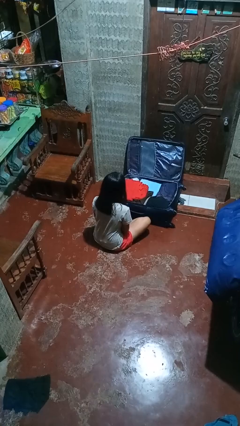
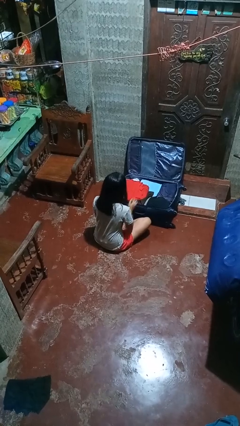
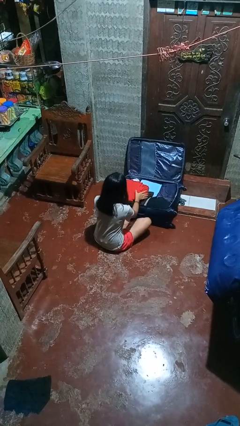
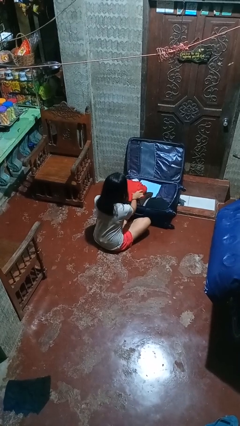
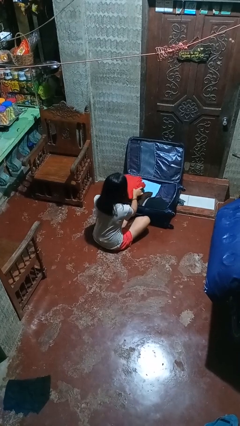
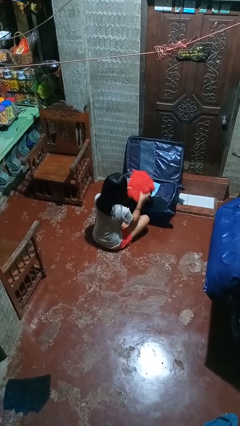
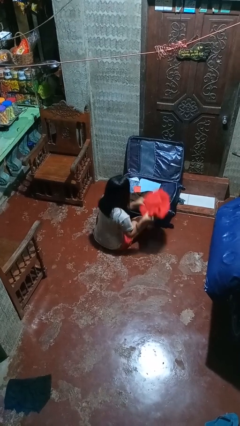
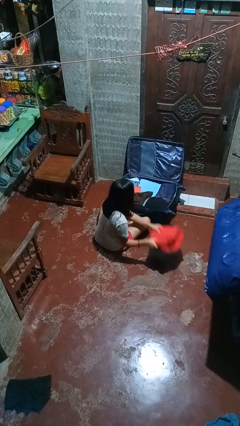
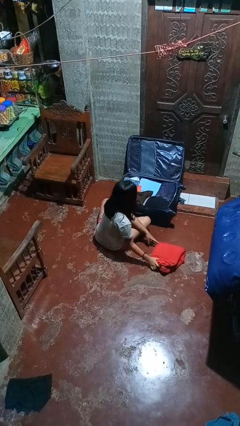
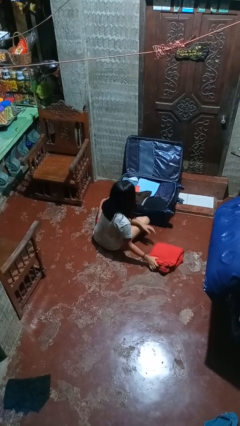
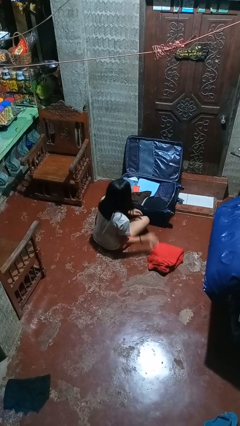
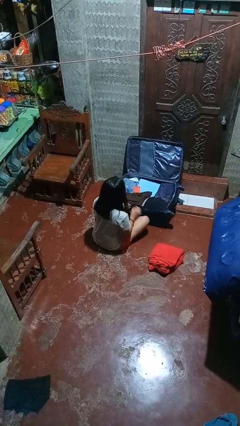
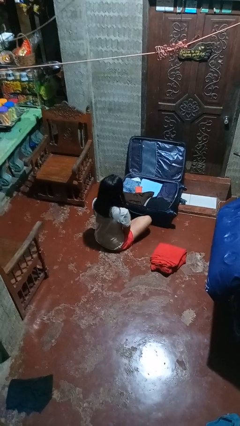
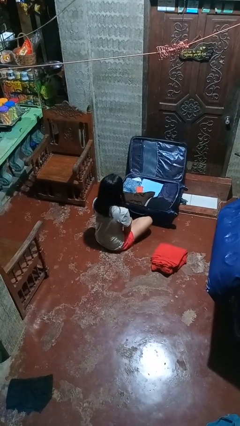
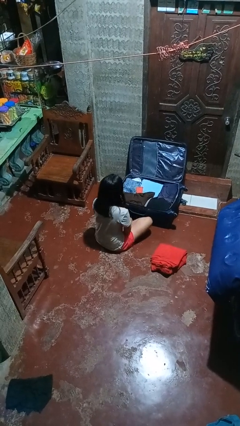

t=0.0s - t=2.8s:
person unloads clothes from suitcase

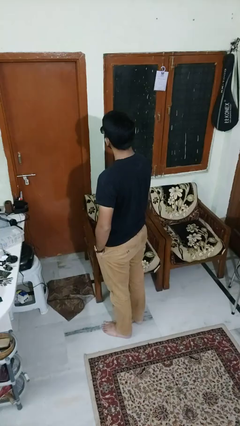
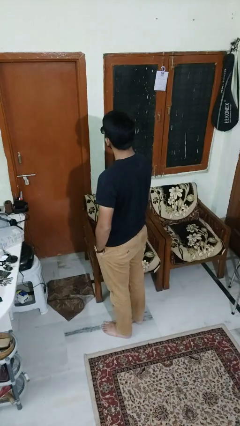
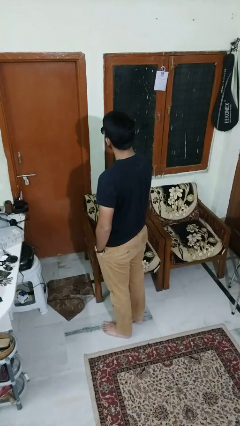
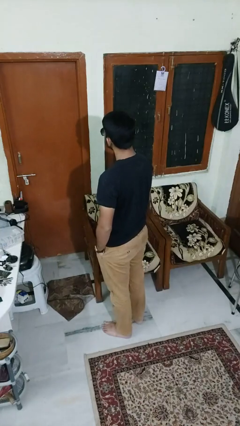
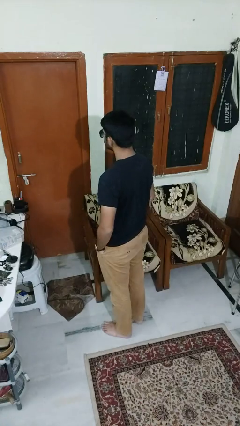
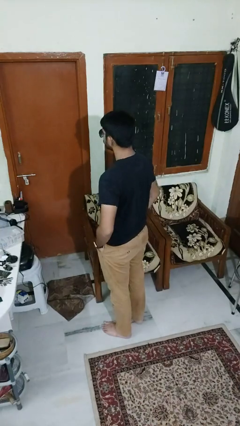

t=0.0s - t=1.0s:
person takes off sunglasses

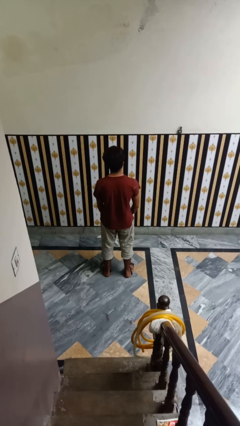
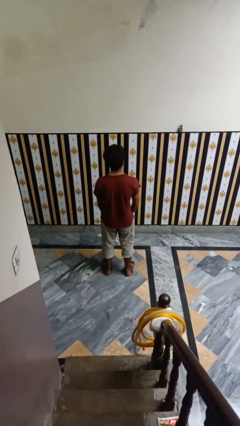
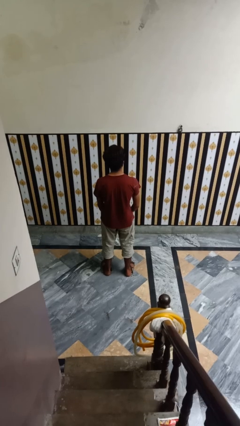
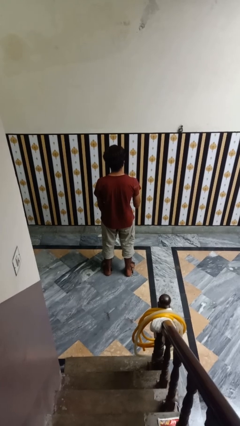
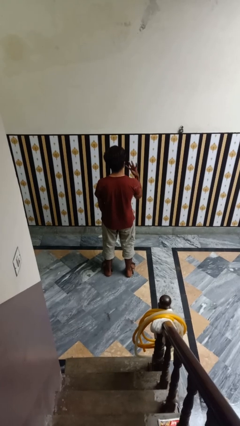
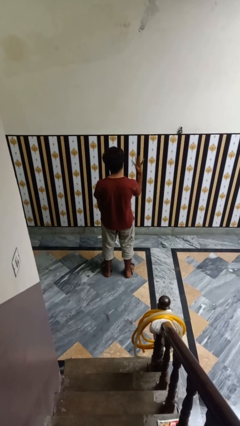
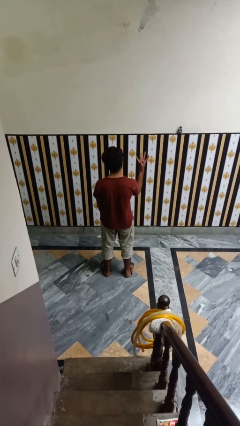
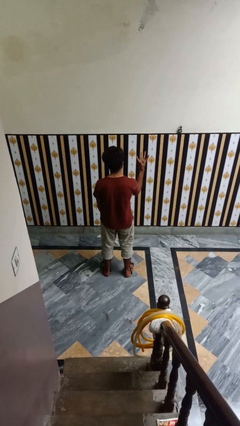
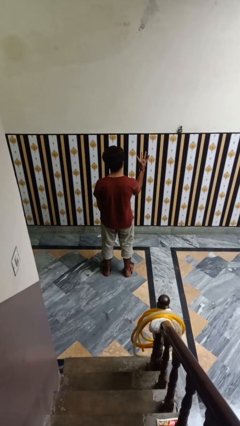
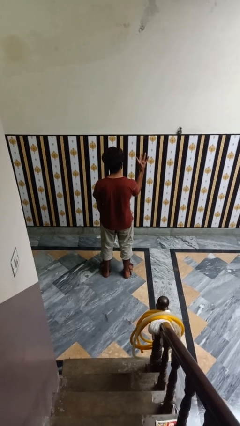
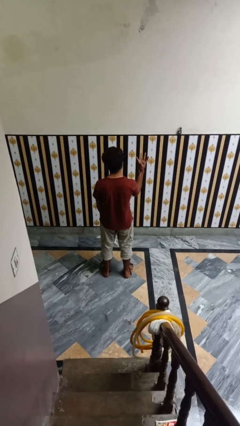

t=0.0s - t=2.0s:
person gestures number four

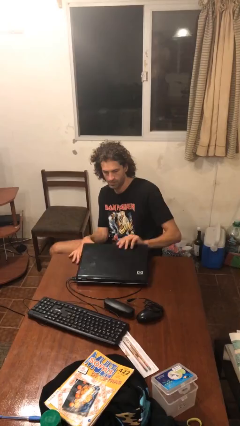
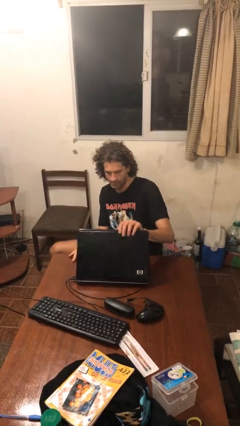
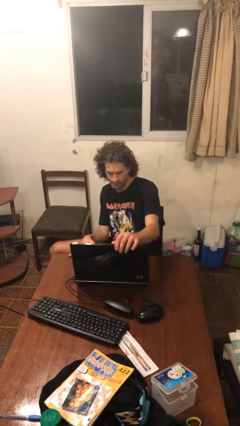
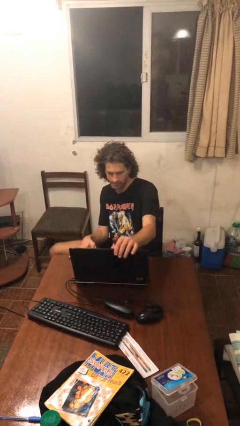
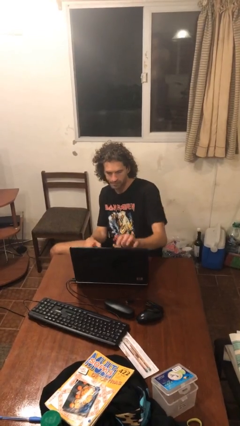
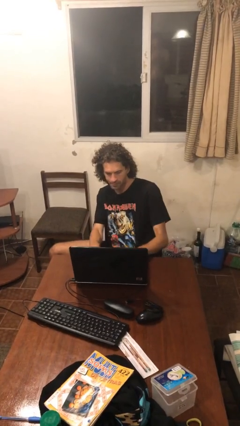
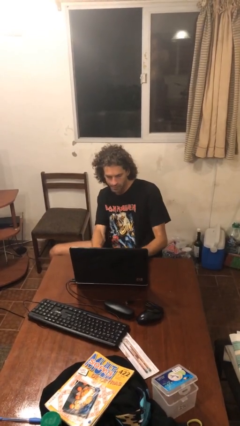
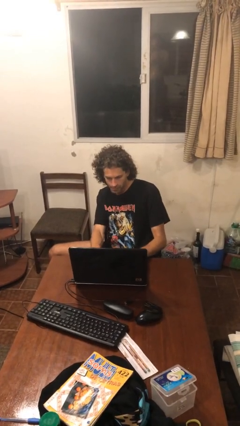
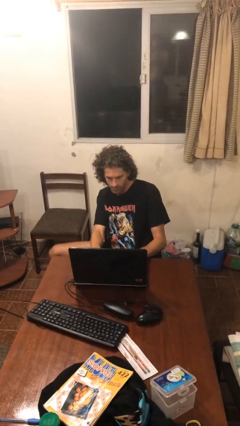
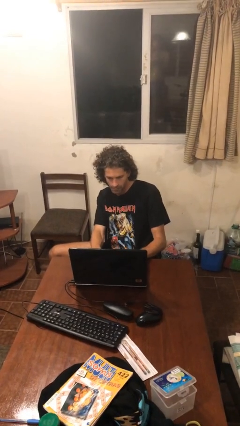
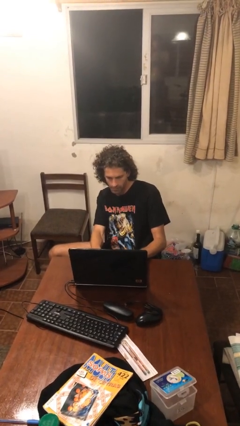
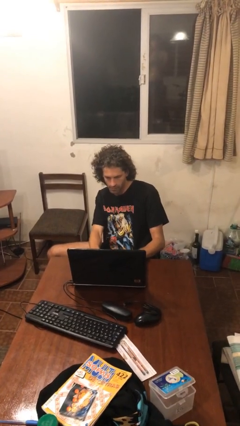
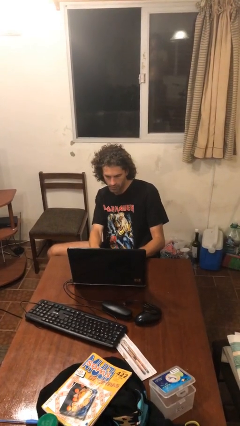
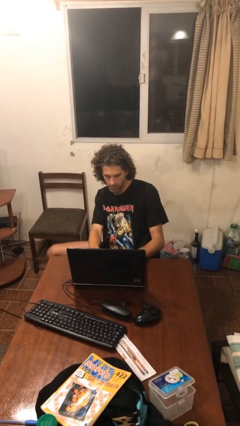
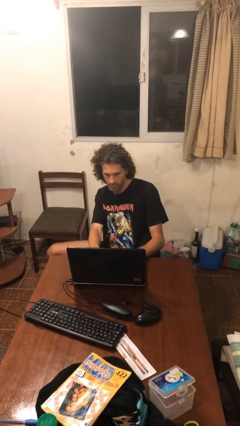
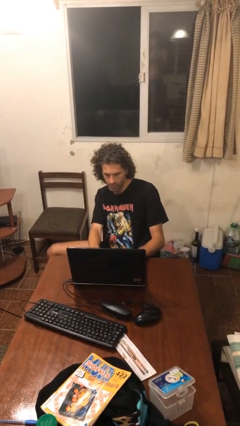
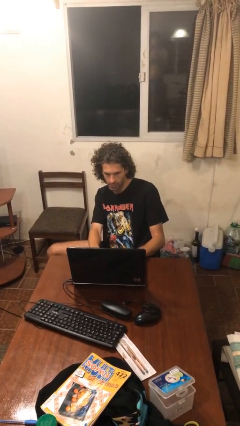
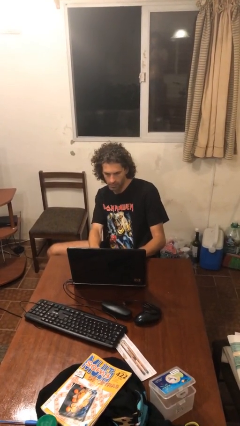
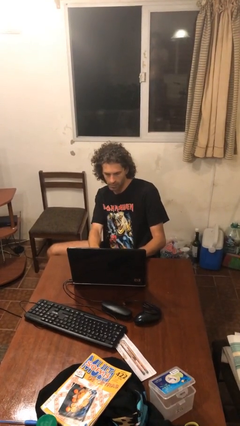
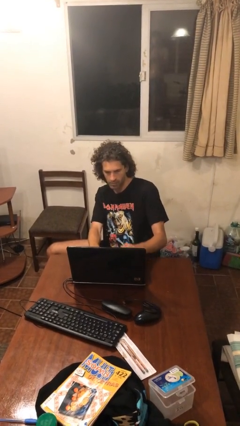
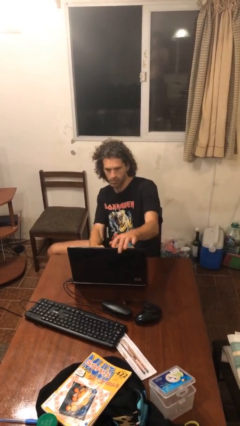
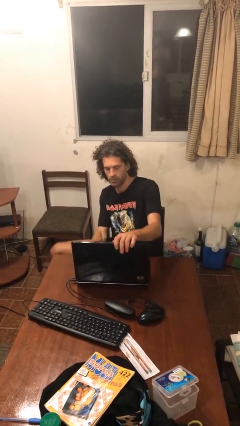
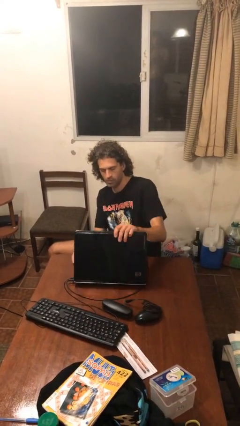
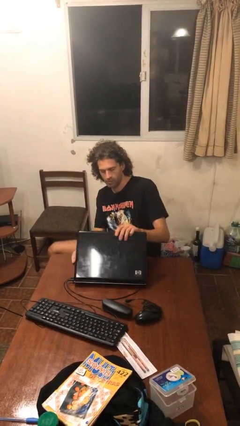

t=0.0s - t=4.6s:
person interacts with laptop

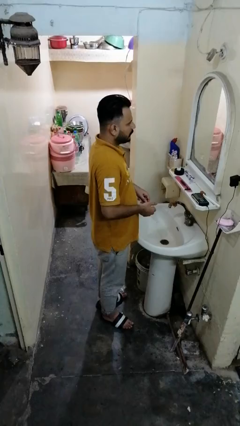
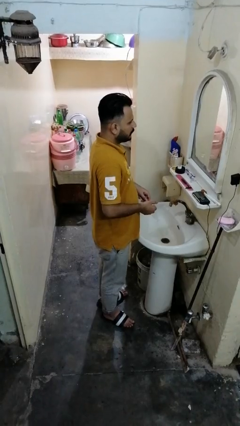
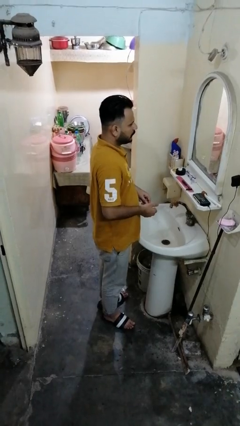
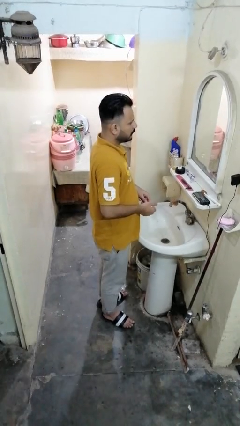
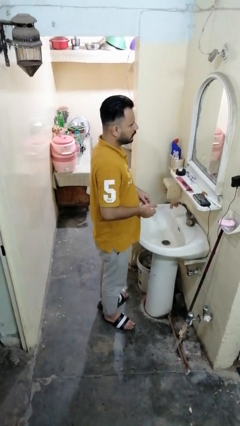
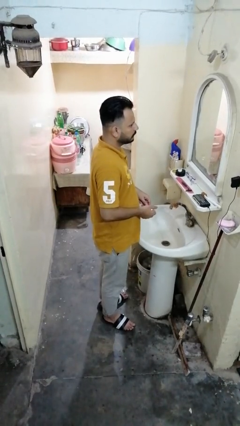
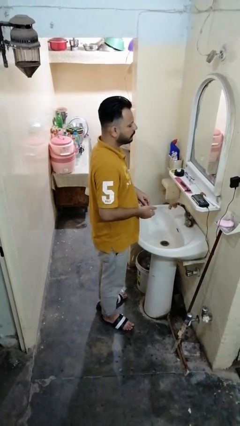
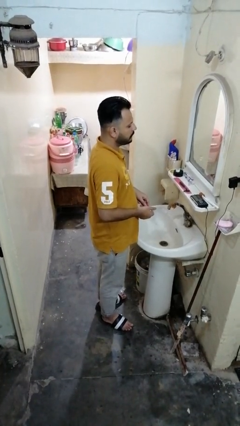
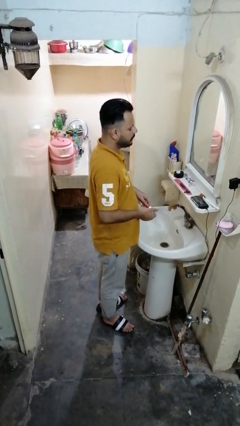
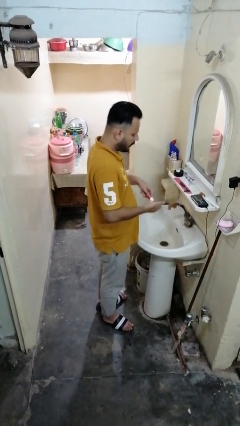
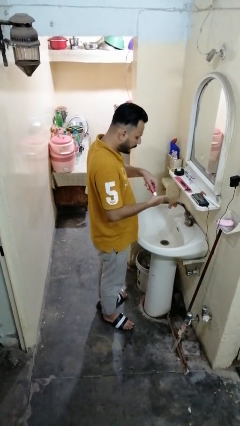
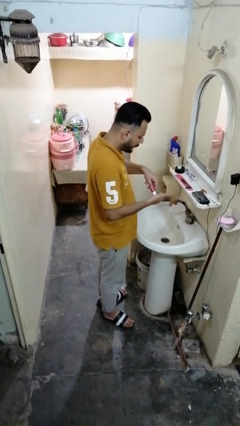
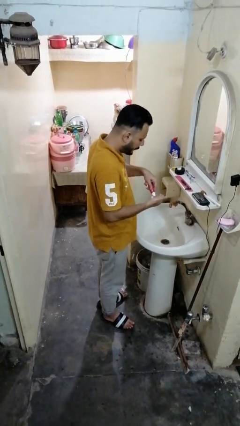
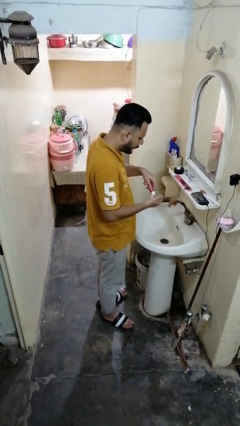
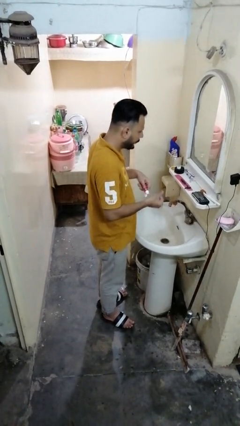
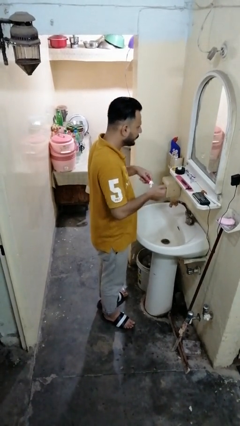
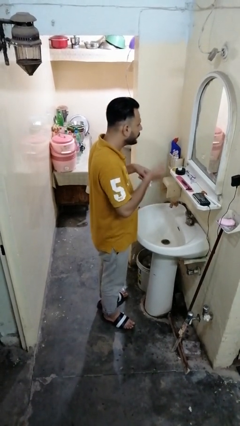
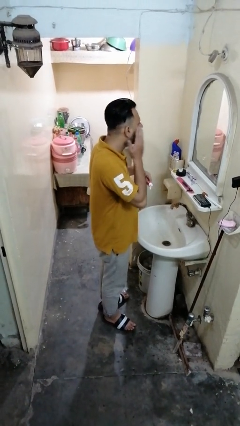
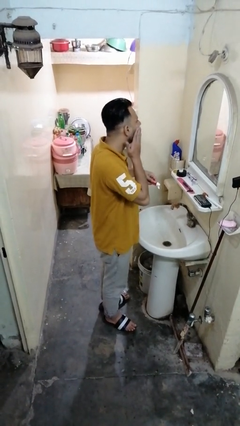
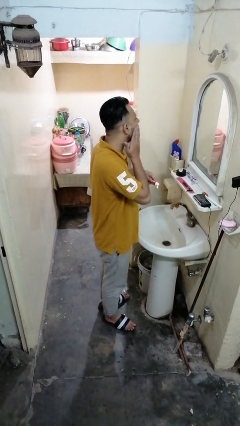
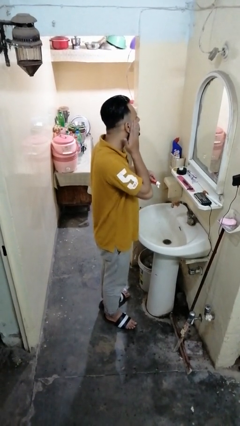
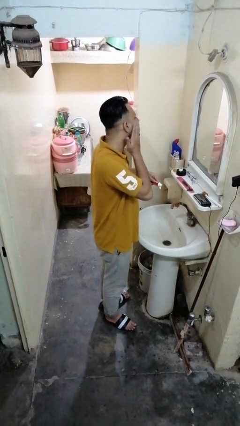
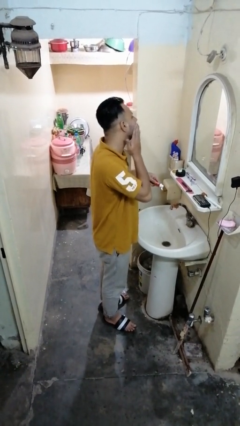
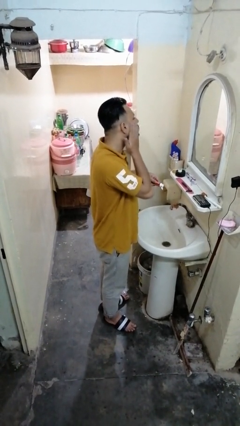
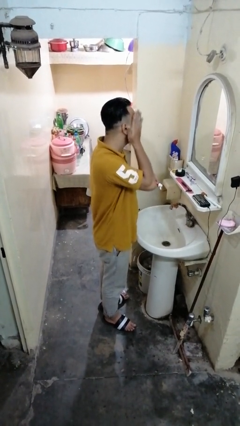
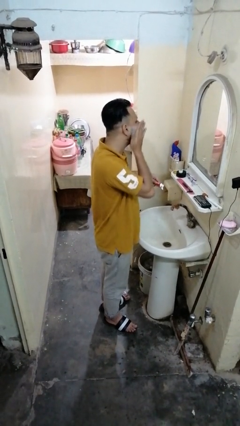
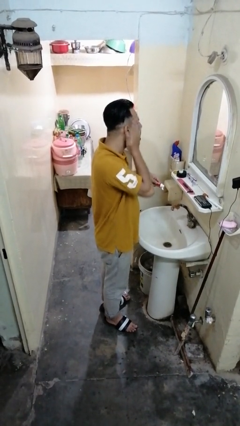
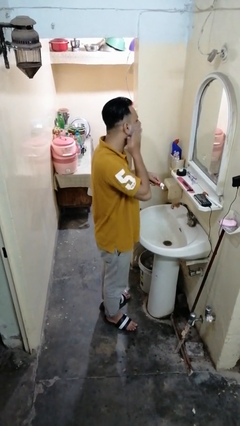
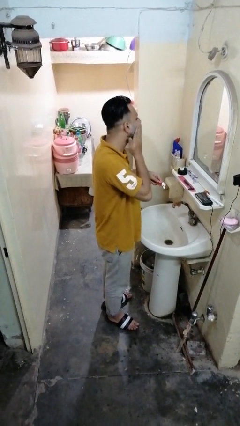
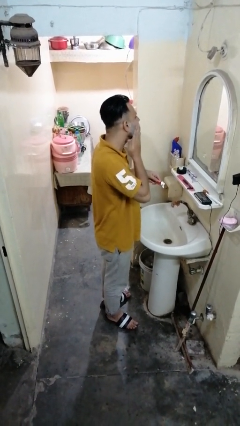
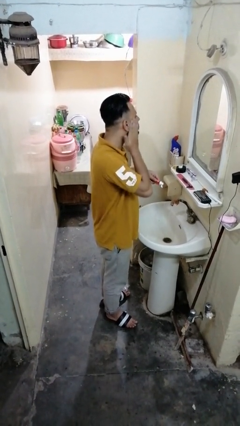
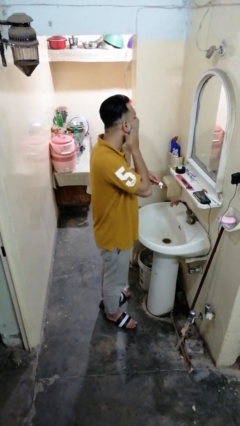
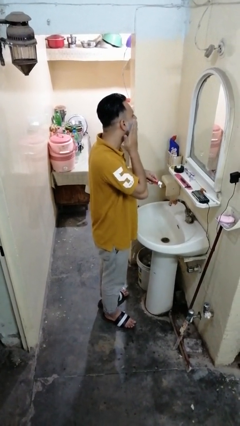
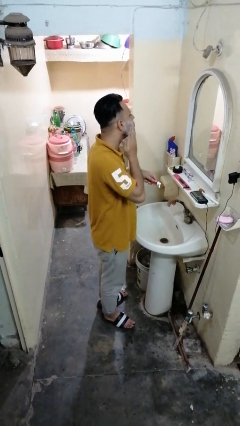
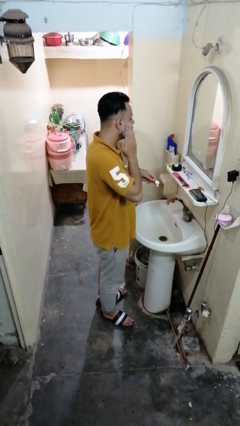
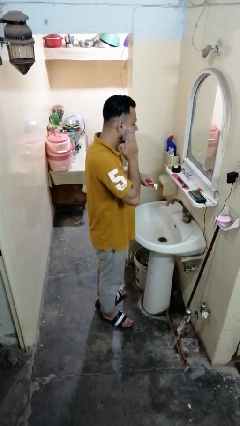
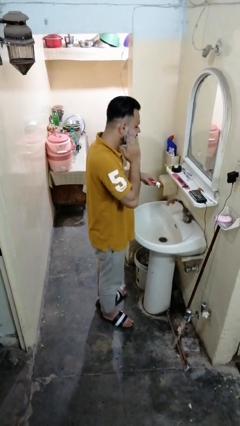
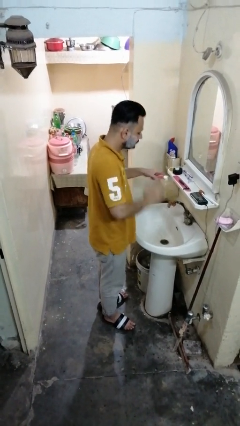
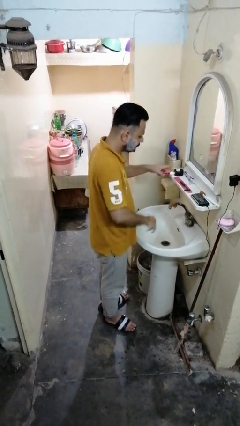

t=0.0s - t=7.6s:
person applies shaving cream
